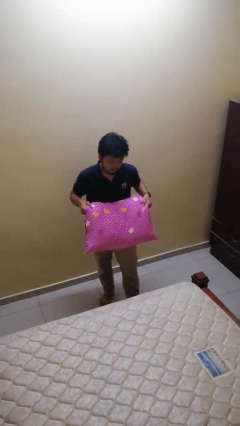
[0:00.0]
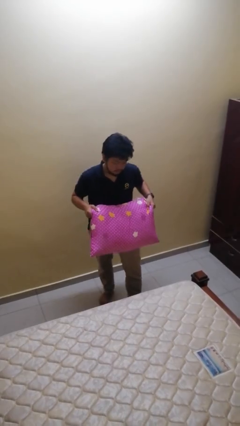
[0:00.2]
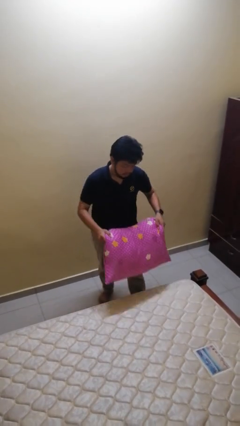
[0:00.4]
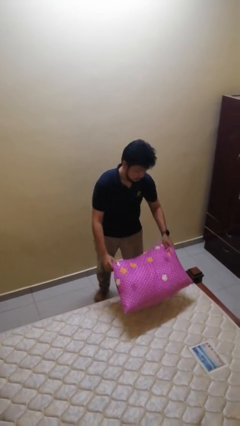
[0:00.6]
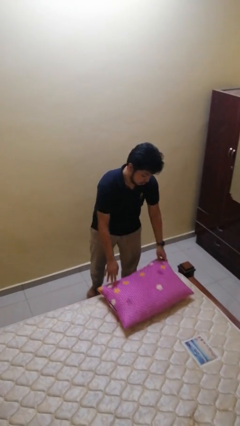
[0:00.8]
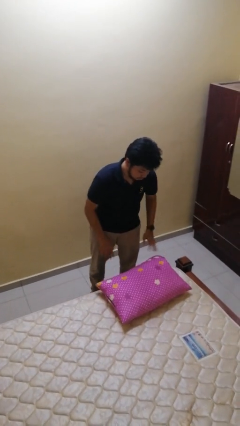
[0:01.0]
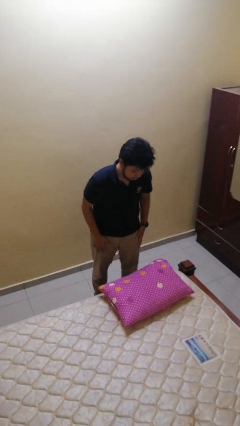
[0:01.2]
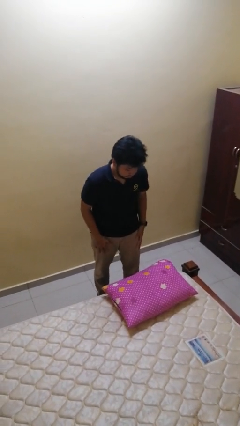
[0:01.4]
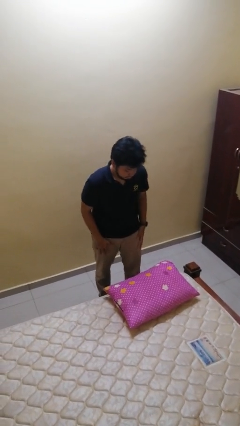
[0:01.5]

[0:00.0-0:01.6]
person puts down object on bed

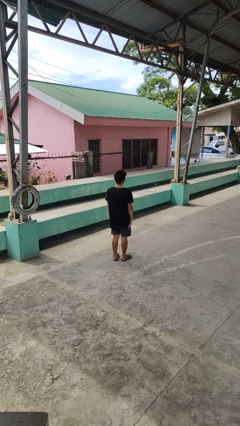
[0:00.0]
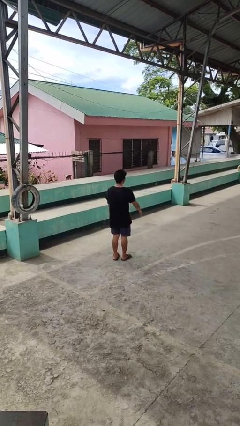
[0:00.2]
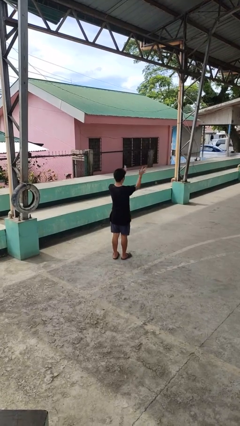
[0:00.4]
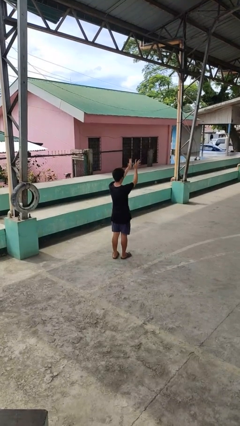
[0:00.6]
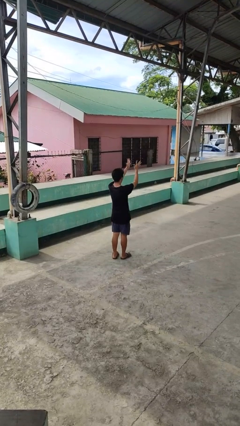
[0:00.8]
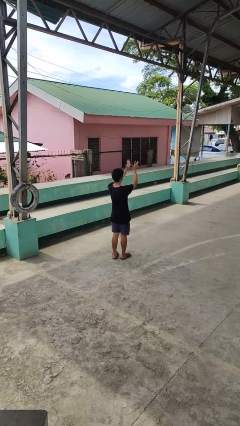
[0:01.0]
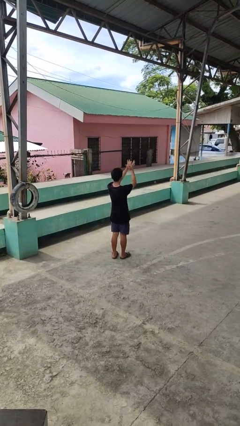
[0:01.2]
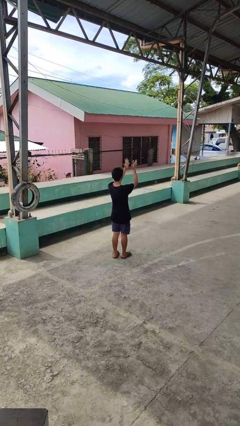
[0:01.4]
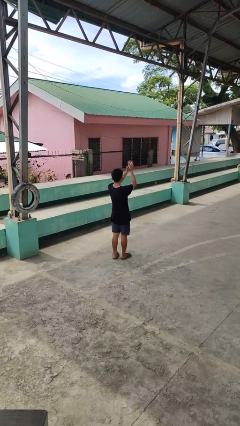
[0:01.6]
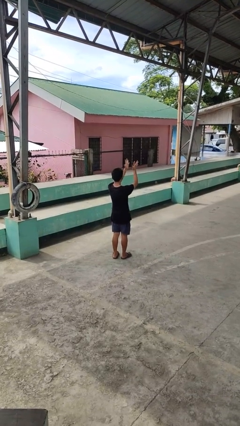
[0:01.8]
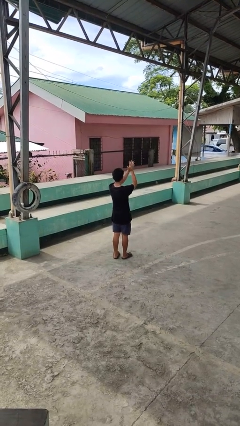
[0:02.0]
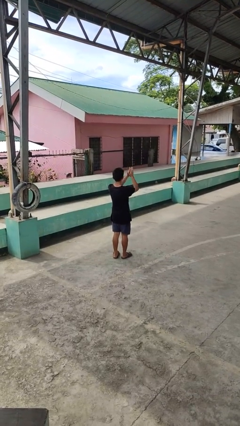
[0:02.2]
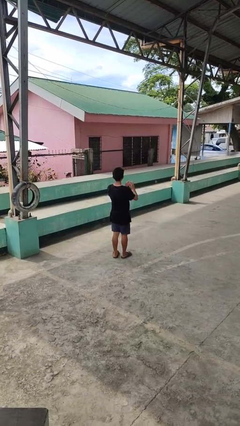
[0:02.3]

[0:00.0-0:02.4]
person claps hands

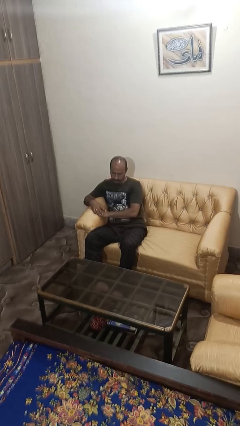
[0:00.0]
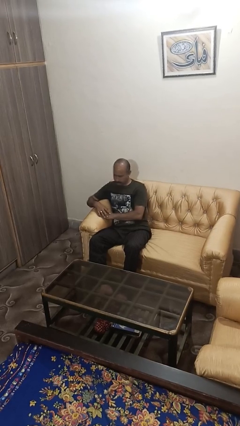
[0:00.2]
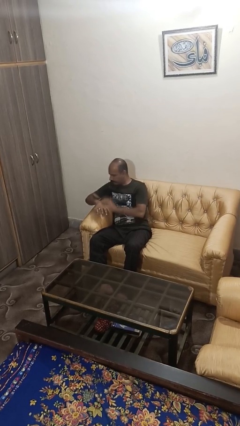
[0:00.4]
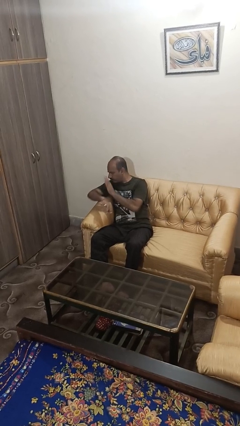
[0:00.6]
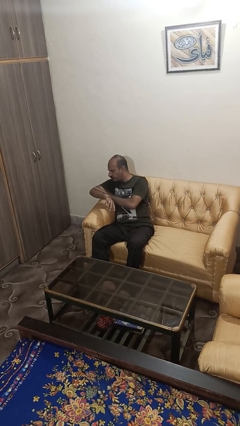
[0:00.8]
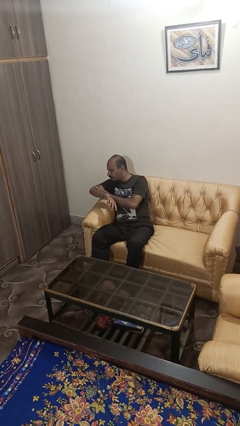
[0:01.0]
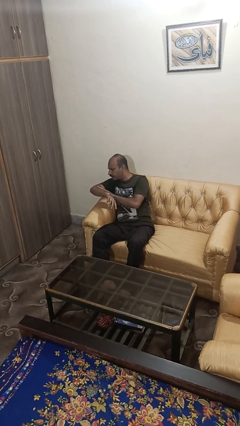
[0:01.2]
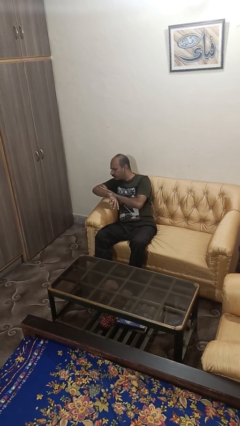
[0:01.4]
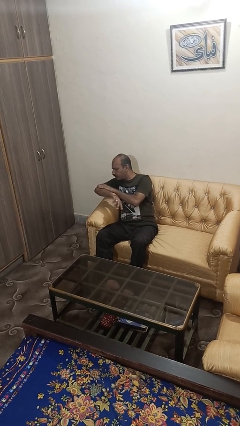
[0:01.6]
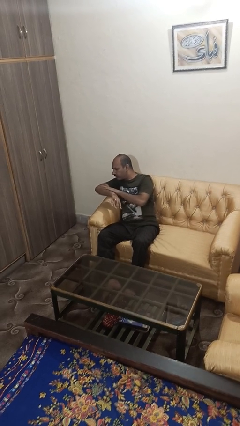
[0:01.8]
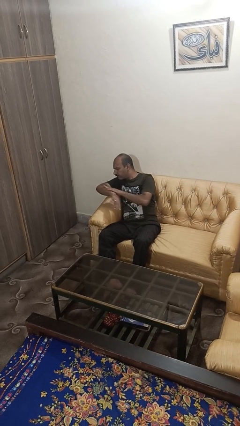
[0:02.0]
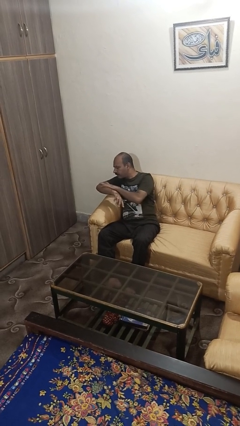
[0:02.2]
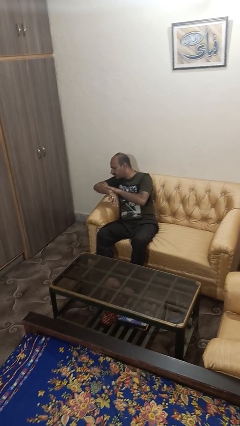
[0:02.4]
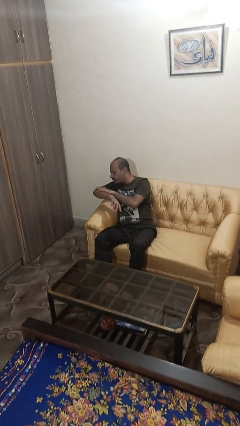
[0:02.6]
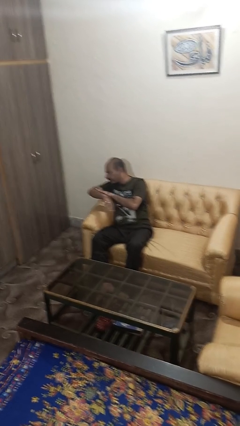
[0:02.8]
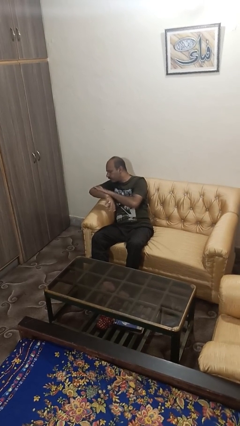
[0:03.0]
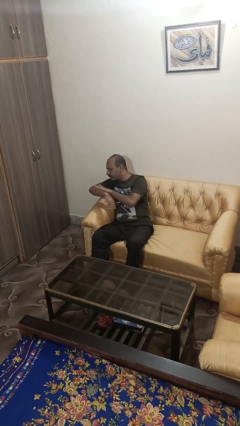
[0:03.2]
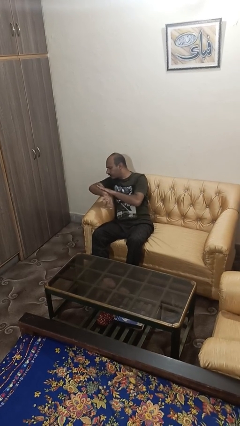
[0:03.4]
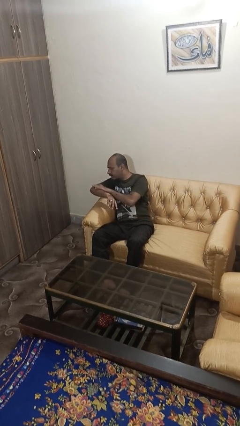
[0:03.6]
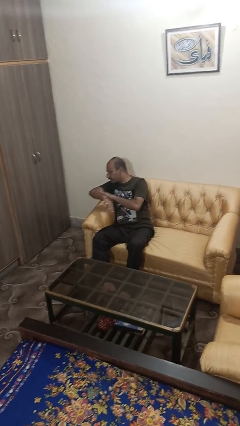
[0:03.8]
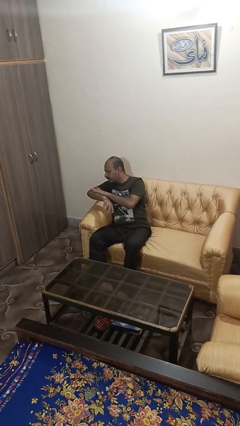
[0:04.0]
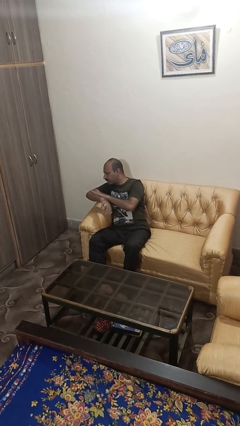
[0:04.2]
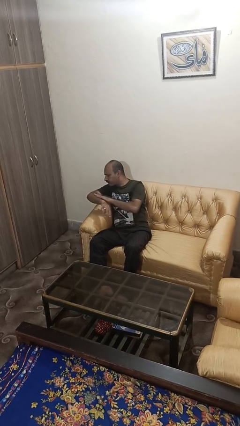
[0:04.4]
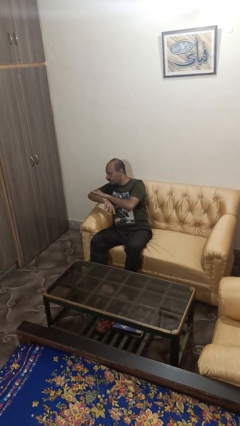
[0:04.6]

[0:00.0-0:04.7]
person swats bug

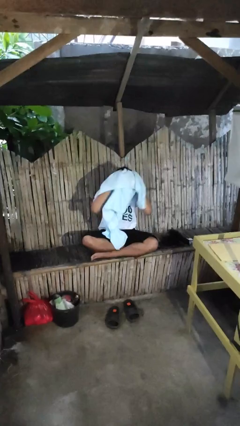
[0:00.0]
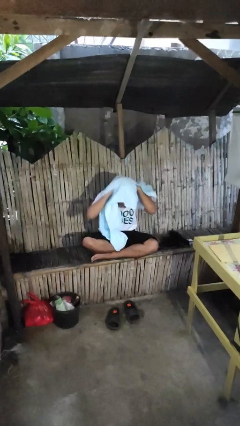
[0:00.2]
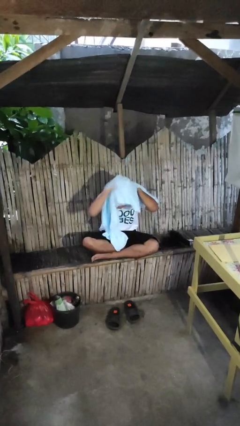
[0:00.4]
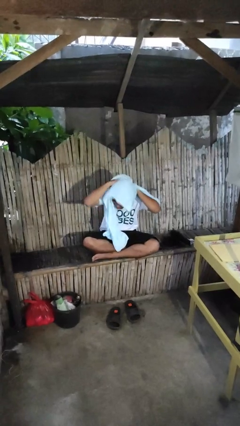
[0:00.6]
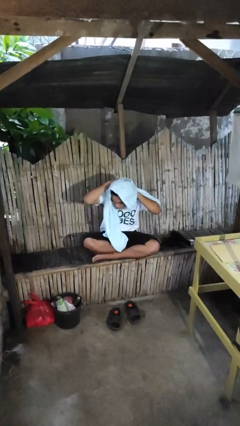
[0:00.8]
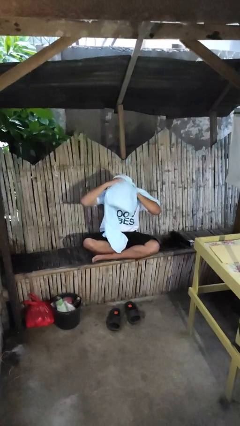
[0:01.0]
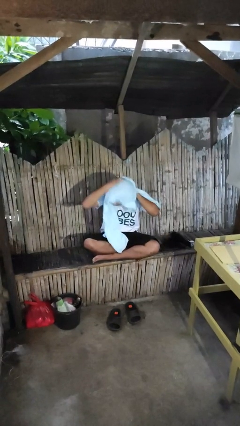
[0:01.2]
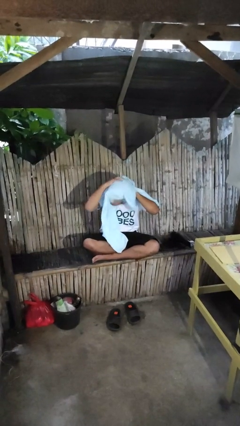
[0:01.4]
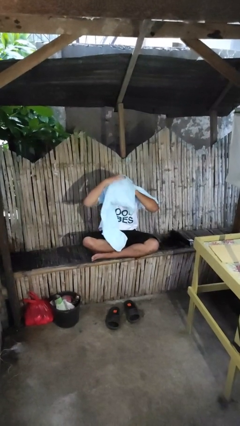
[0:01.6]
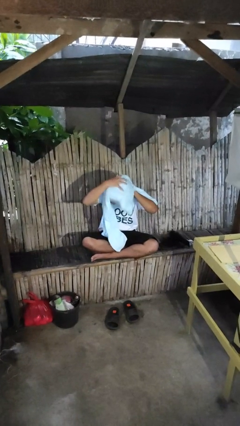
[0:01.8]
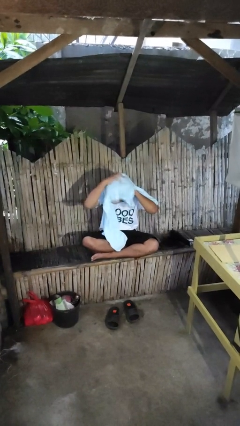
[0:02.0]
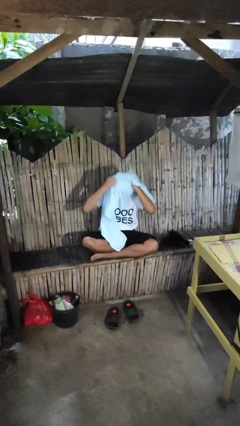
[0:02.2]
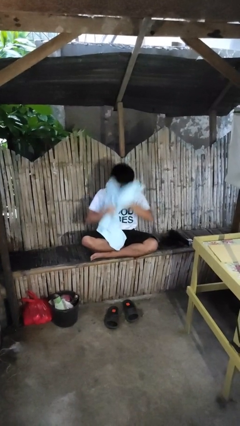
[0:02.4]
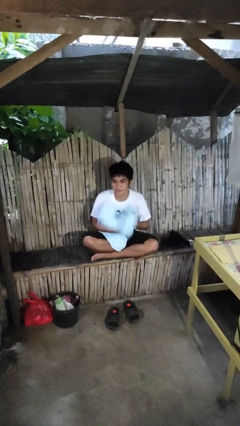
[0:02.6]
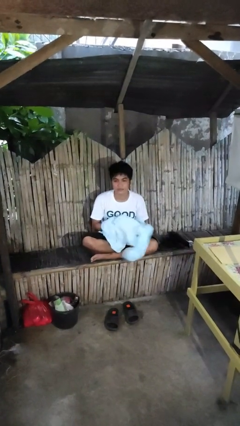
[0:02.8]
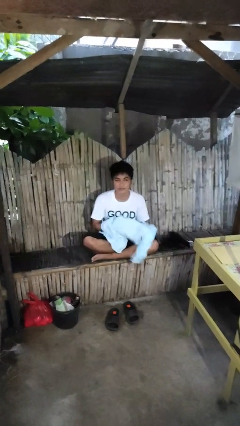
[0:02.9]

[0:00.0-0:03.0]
person dries hair with towel

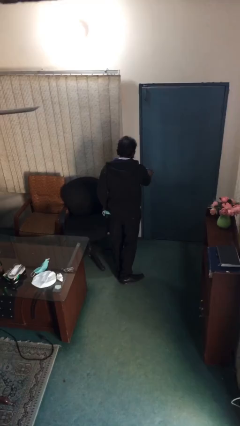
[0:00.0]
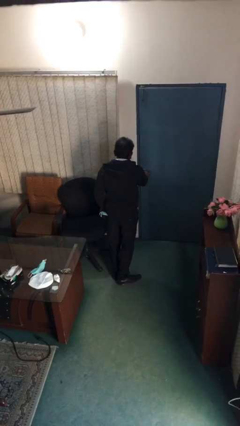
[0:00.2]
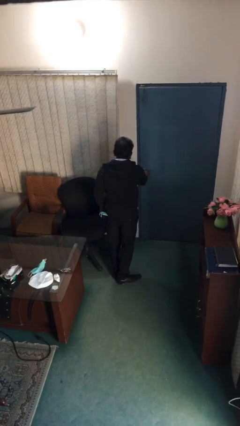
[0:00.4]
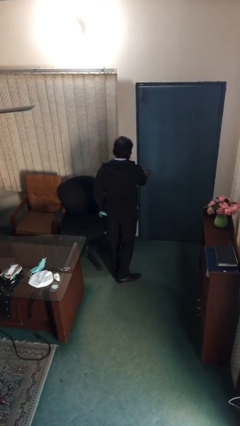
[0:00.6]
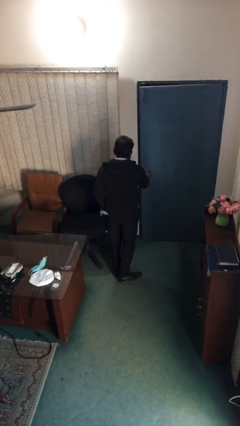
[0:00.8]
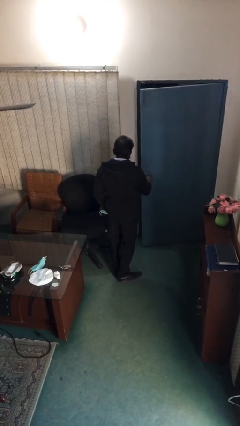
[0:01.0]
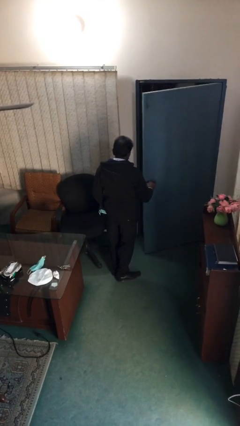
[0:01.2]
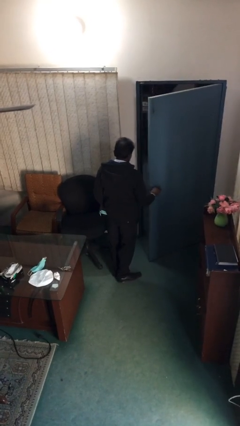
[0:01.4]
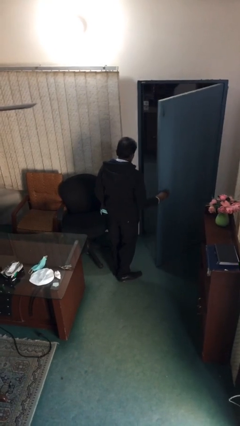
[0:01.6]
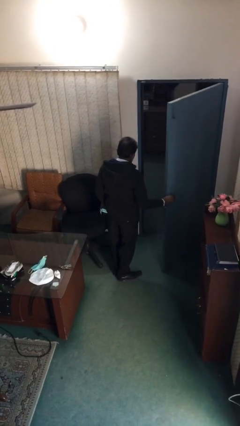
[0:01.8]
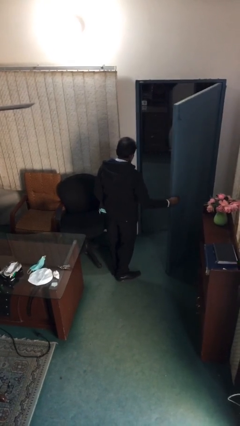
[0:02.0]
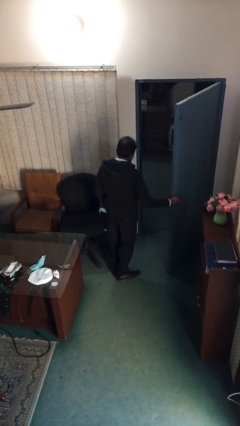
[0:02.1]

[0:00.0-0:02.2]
person opens facility door

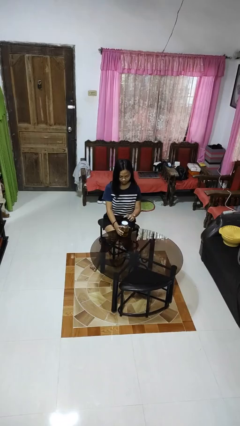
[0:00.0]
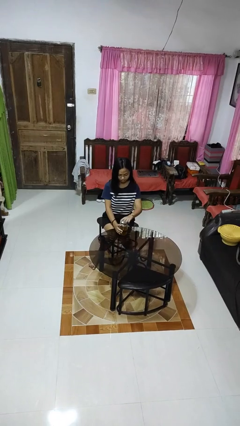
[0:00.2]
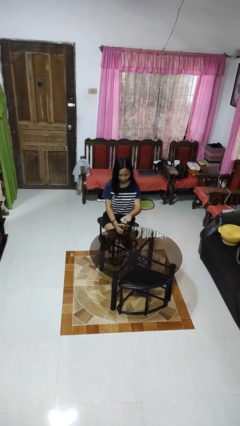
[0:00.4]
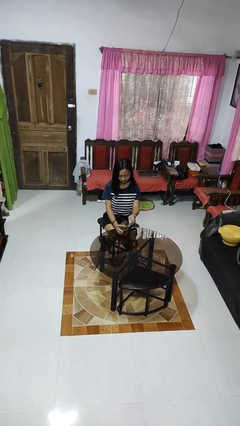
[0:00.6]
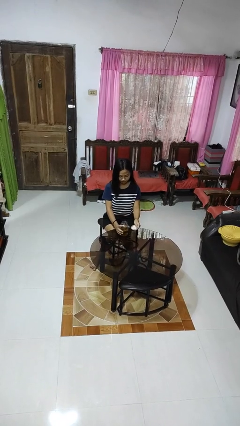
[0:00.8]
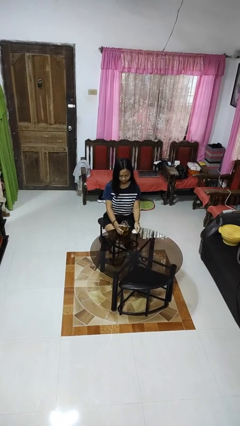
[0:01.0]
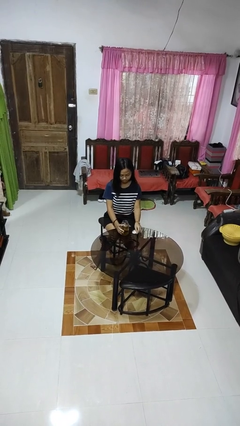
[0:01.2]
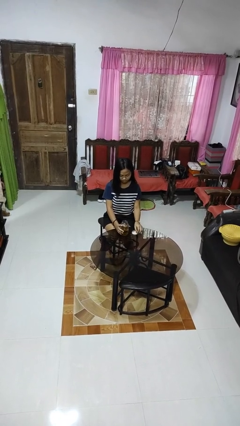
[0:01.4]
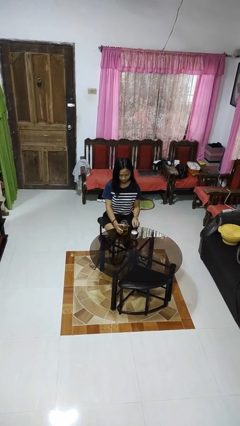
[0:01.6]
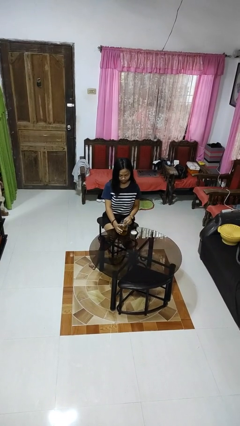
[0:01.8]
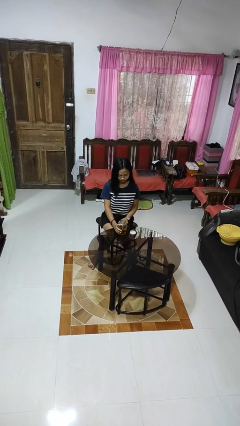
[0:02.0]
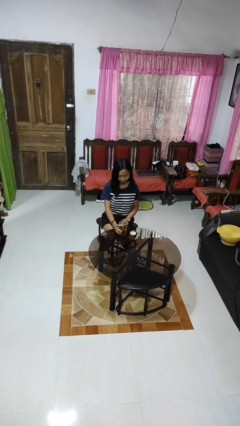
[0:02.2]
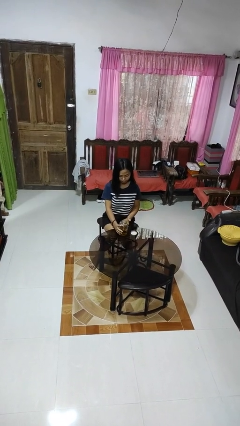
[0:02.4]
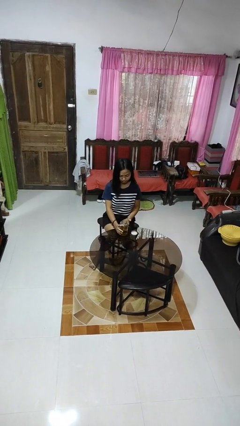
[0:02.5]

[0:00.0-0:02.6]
person opens jar

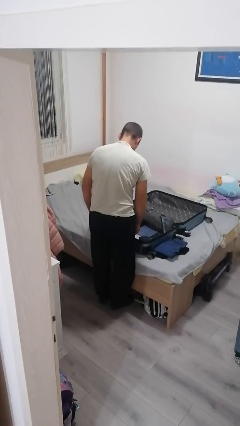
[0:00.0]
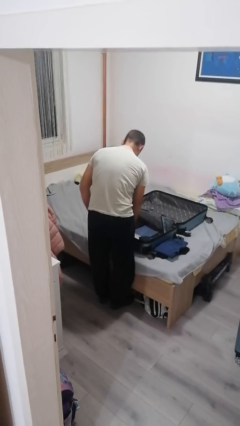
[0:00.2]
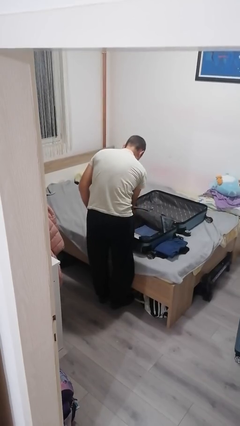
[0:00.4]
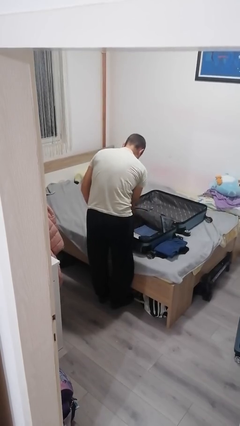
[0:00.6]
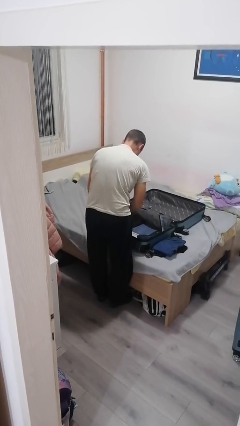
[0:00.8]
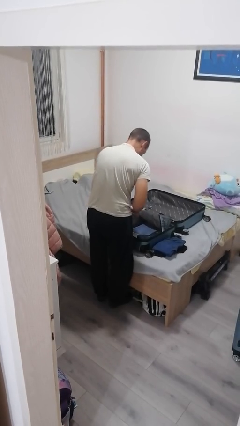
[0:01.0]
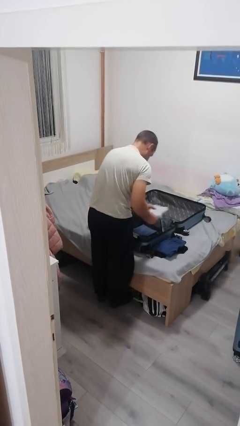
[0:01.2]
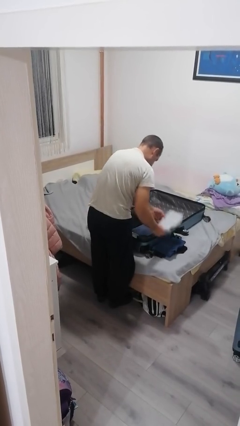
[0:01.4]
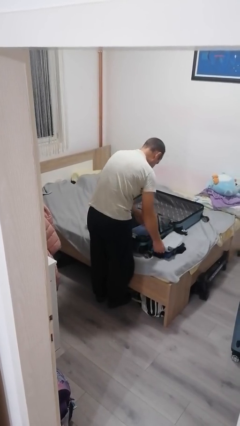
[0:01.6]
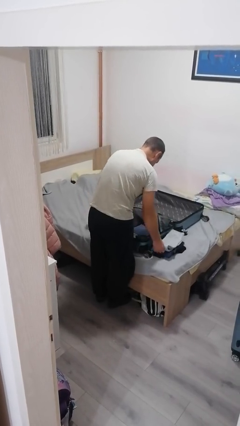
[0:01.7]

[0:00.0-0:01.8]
person unloads clothes from suitcase
